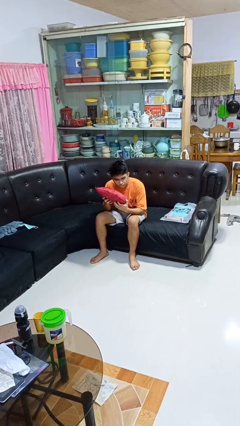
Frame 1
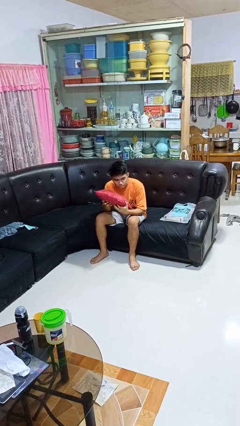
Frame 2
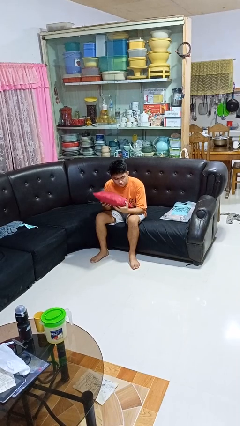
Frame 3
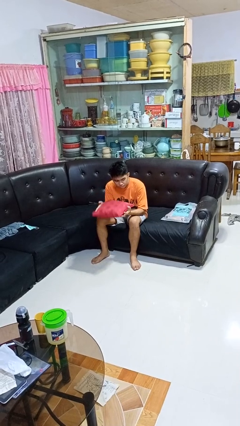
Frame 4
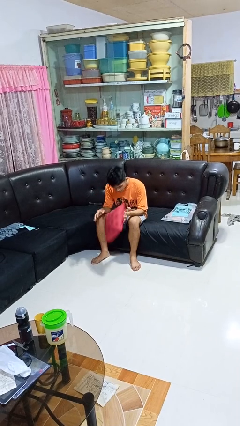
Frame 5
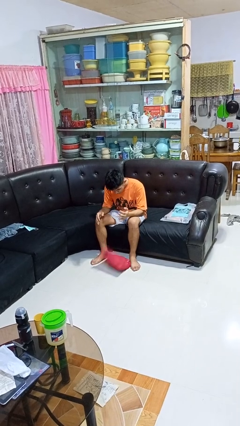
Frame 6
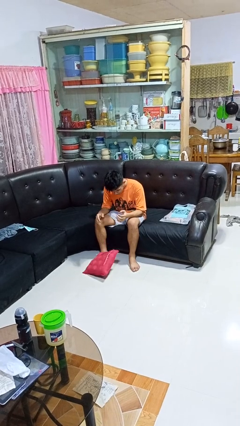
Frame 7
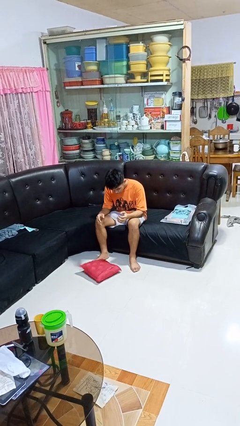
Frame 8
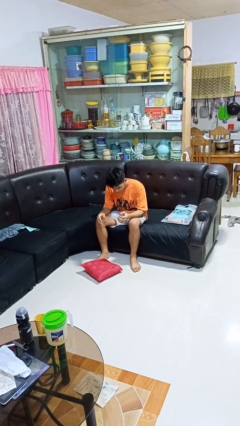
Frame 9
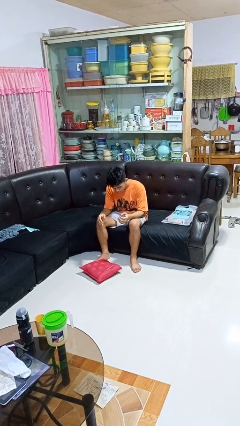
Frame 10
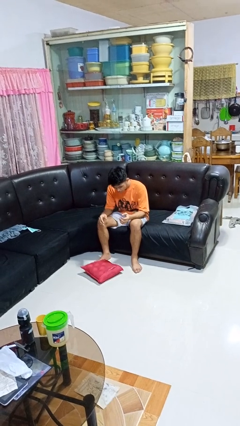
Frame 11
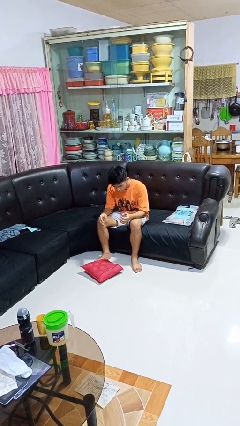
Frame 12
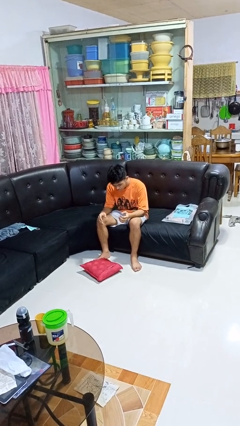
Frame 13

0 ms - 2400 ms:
person drops object

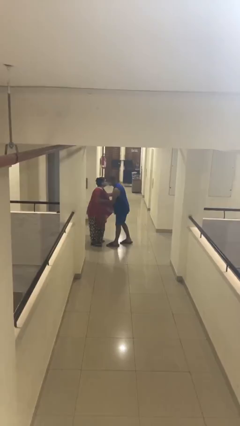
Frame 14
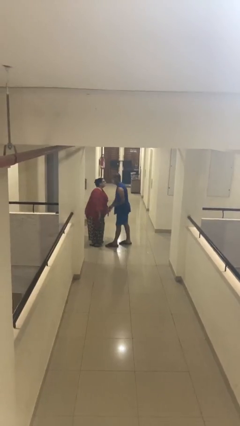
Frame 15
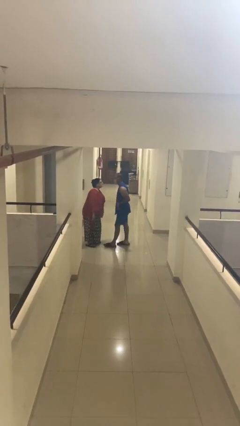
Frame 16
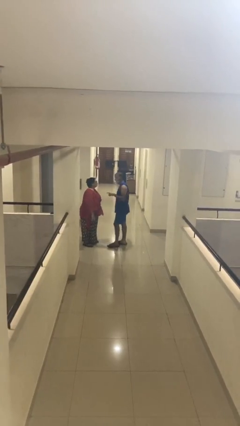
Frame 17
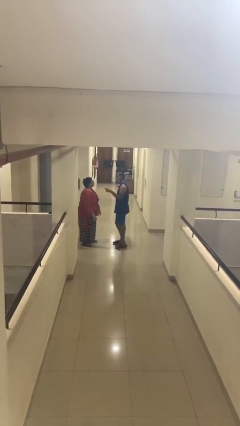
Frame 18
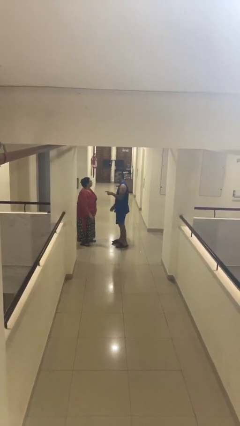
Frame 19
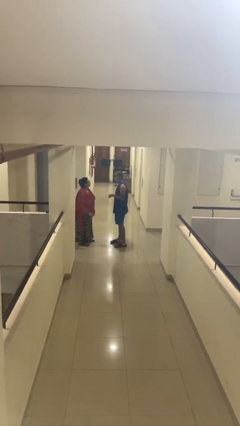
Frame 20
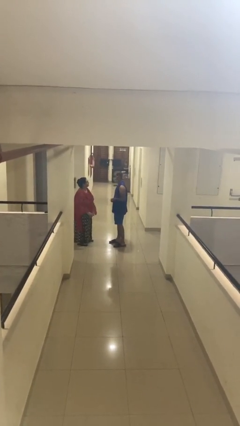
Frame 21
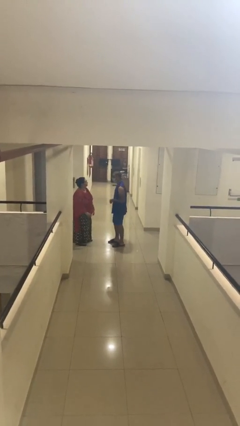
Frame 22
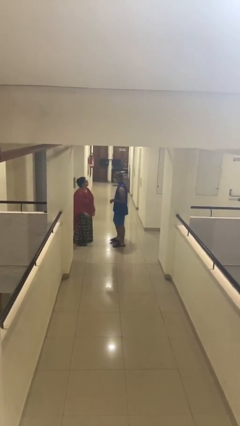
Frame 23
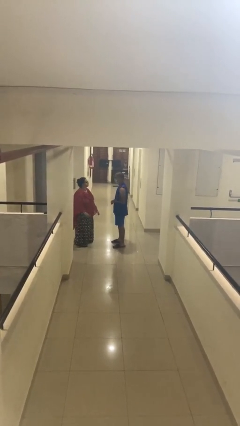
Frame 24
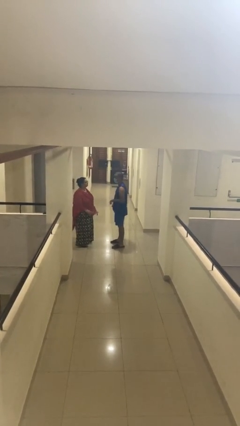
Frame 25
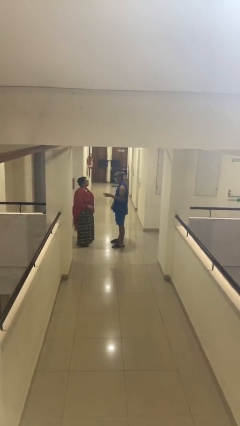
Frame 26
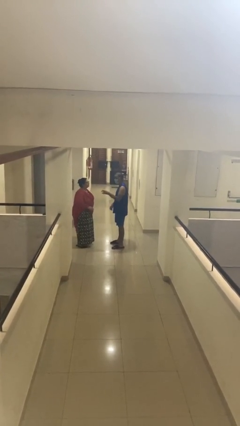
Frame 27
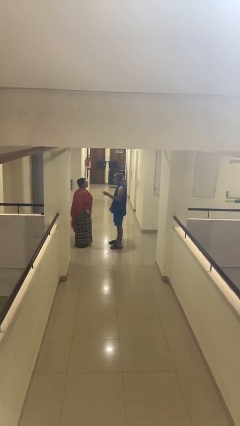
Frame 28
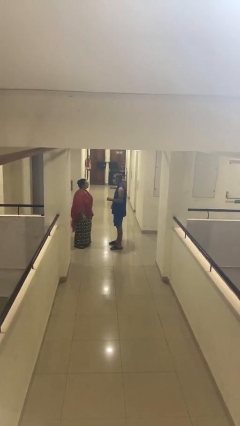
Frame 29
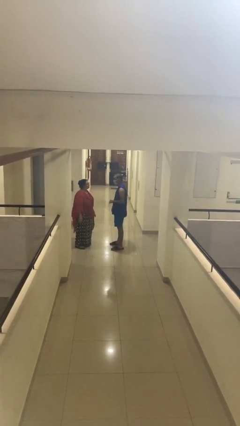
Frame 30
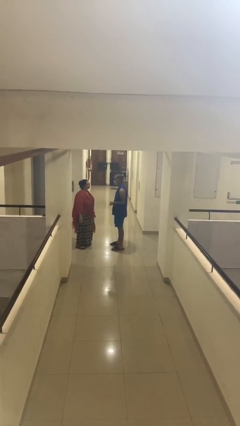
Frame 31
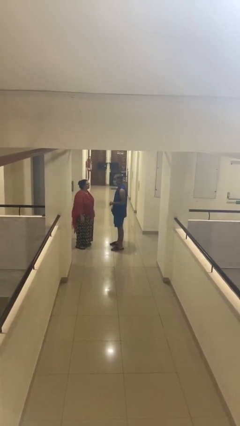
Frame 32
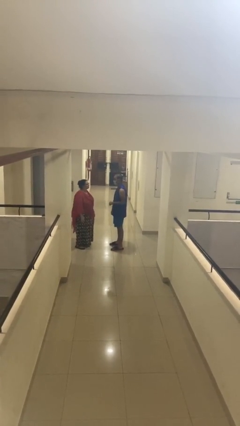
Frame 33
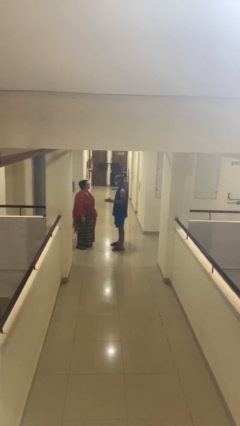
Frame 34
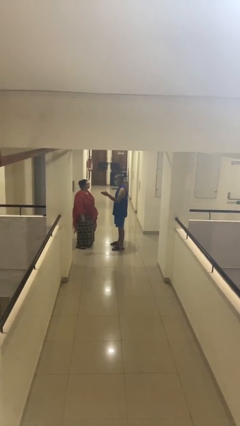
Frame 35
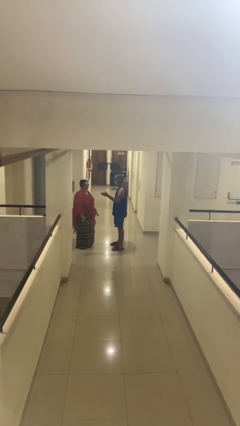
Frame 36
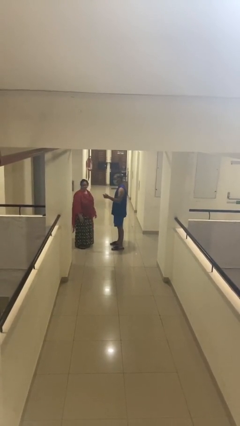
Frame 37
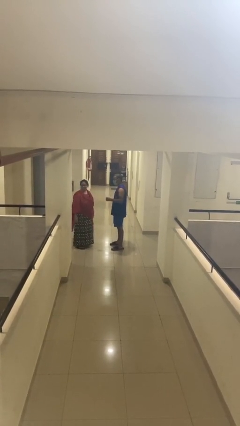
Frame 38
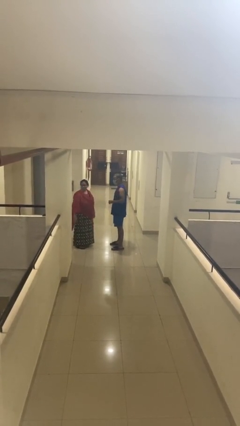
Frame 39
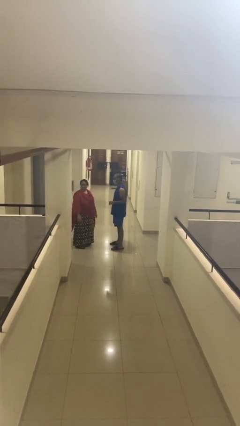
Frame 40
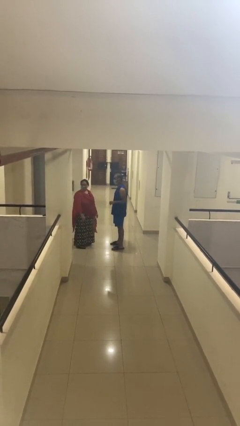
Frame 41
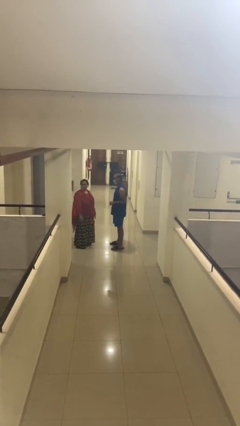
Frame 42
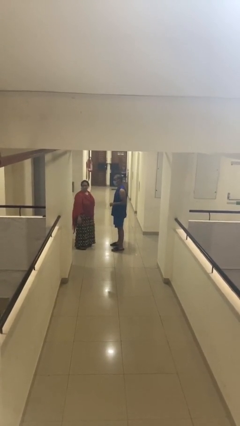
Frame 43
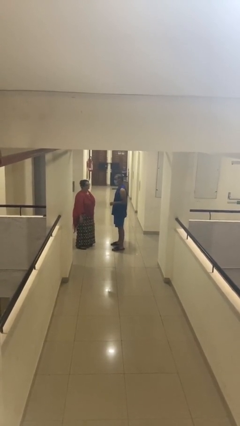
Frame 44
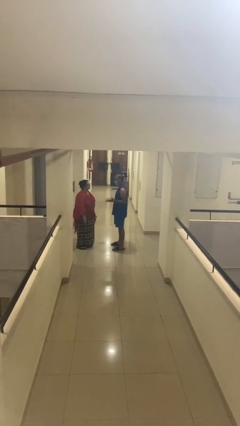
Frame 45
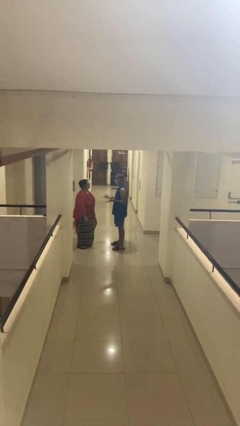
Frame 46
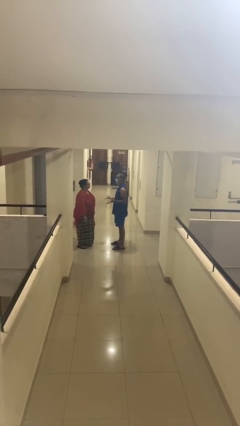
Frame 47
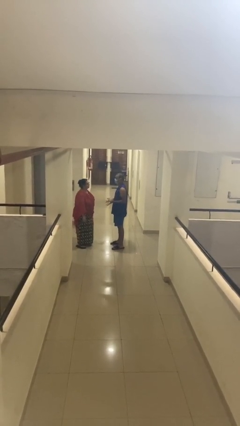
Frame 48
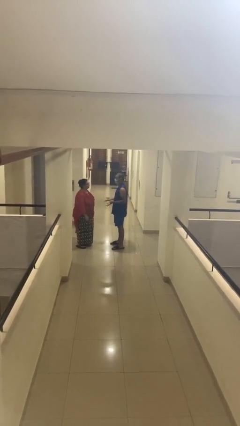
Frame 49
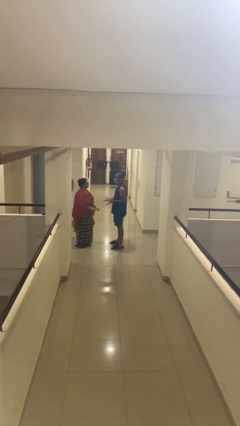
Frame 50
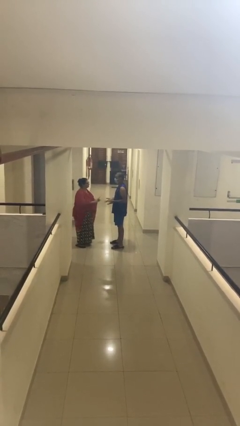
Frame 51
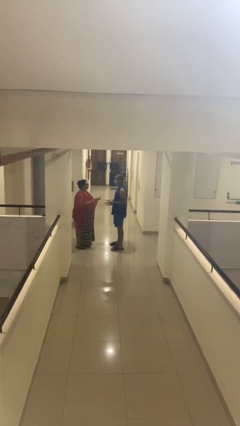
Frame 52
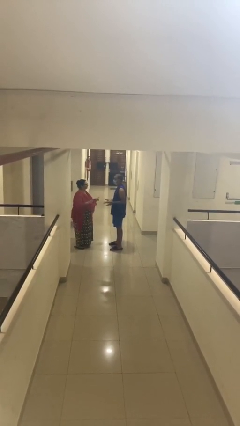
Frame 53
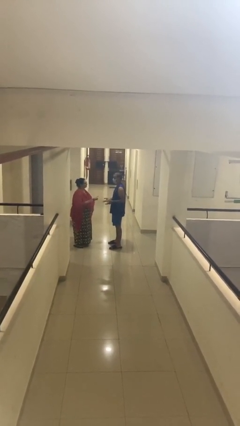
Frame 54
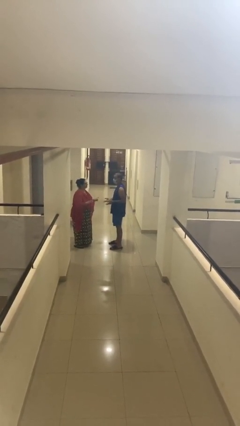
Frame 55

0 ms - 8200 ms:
person talks to person

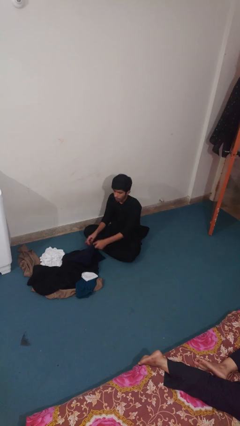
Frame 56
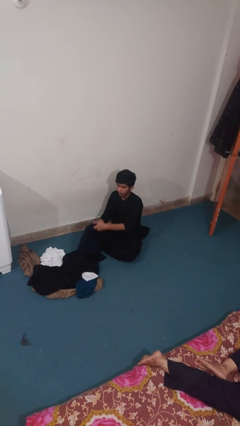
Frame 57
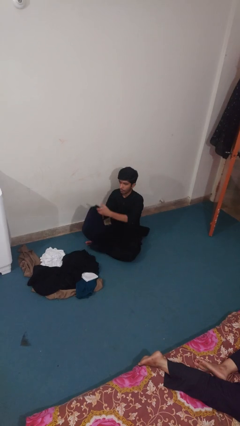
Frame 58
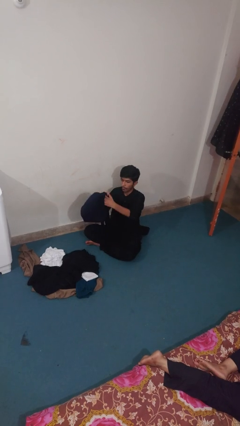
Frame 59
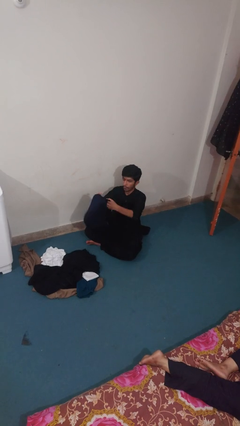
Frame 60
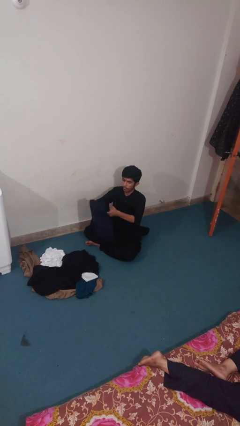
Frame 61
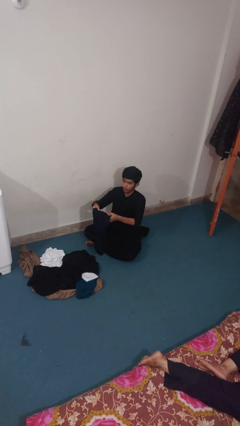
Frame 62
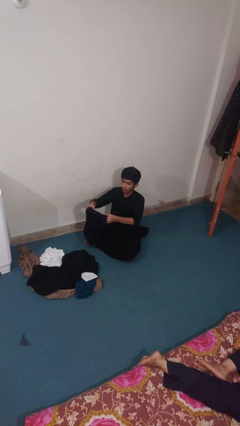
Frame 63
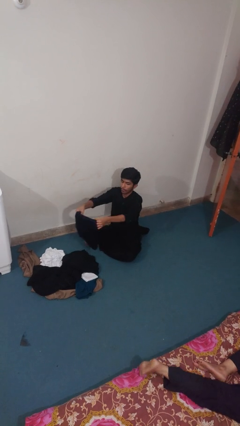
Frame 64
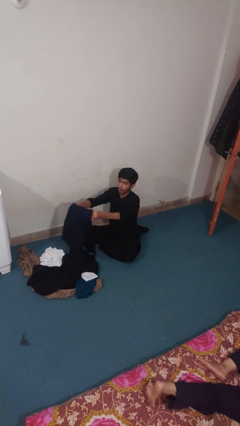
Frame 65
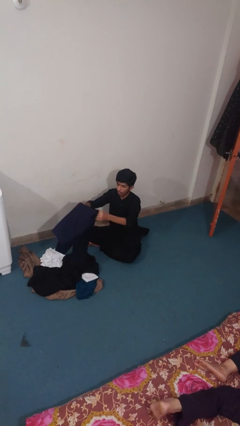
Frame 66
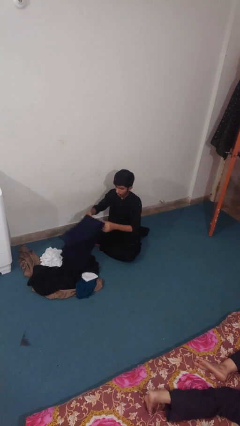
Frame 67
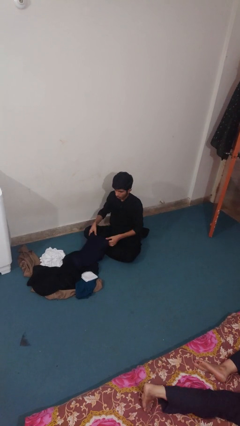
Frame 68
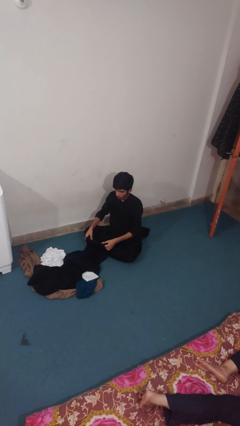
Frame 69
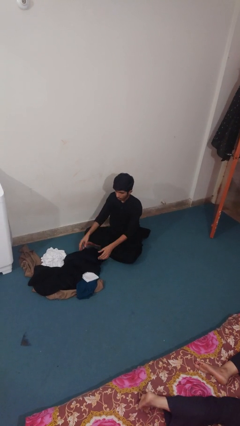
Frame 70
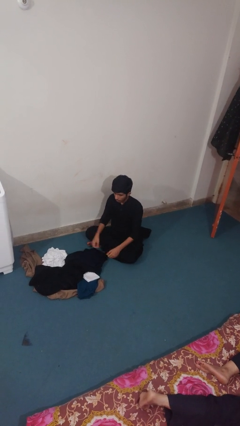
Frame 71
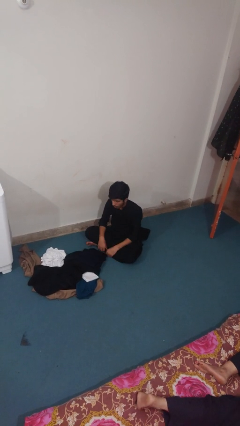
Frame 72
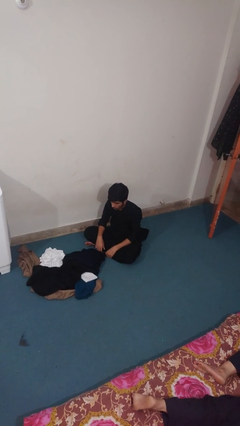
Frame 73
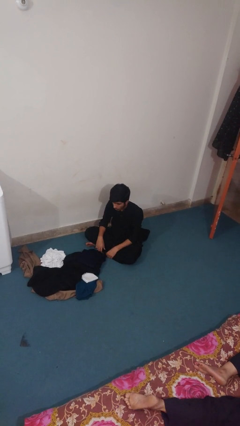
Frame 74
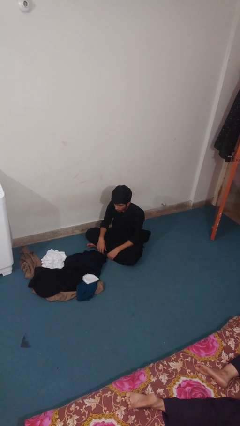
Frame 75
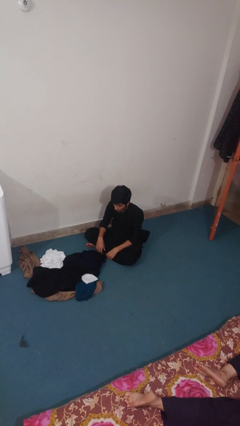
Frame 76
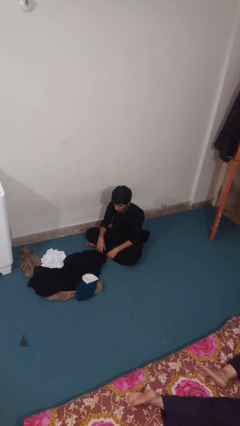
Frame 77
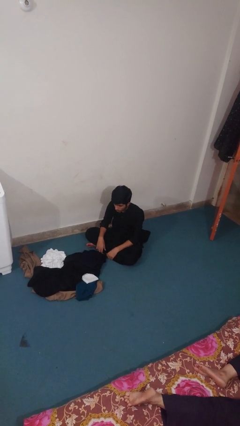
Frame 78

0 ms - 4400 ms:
person folds pants

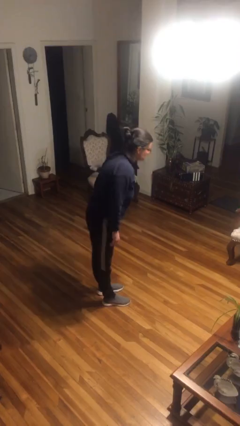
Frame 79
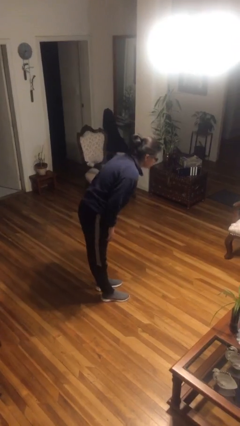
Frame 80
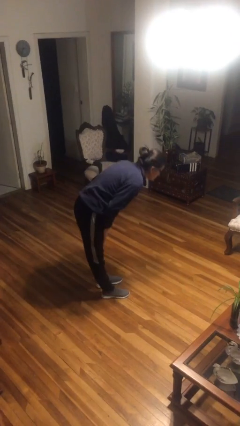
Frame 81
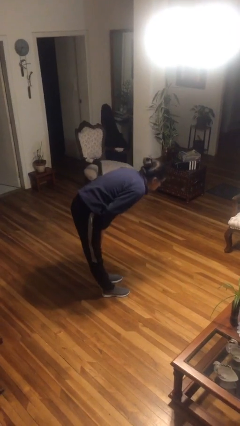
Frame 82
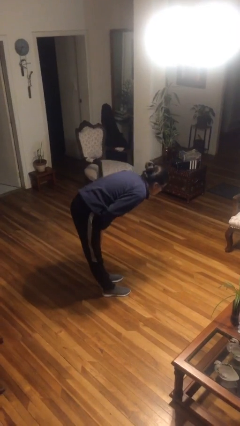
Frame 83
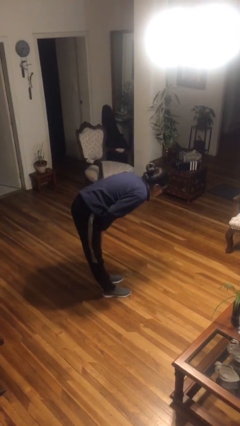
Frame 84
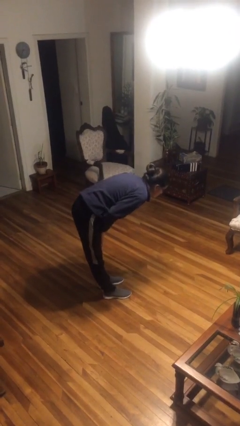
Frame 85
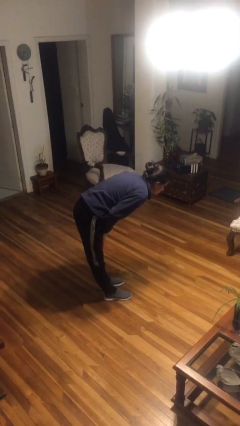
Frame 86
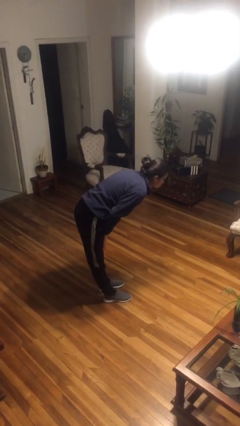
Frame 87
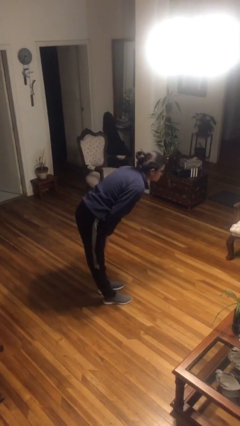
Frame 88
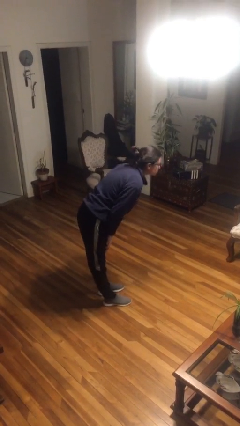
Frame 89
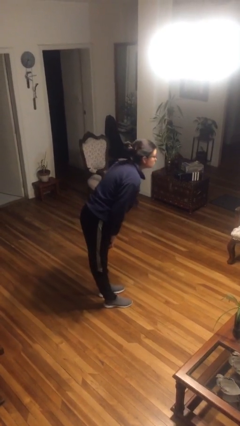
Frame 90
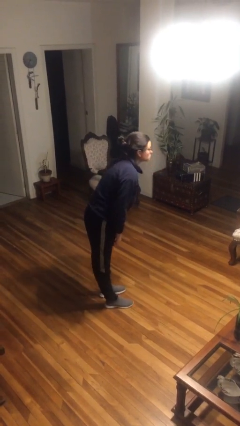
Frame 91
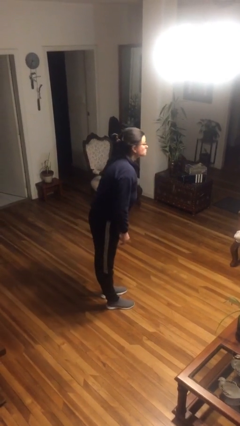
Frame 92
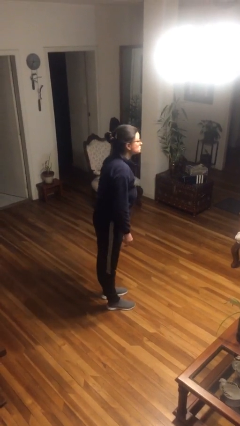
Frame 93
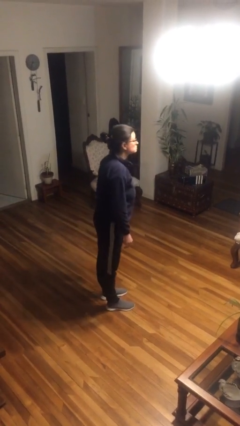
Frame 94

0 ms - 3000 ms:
person bows

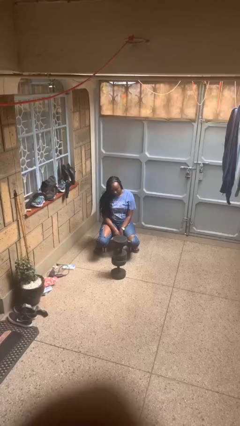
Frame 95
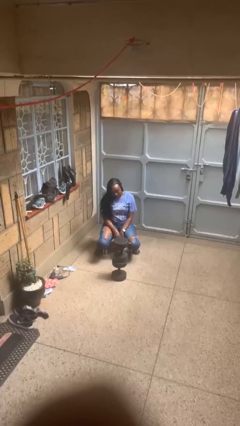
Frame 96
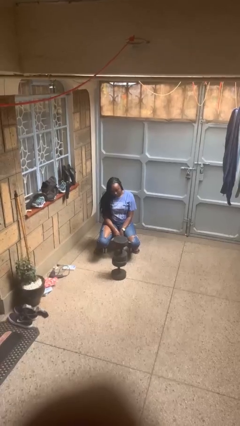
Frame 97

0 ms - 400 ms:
person gestures behind me
